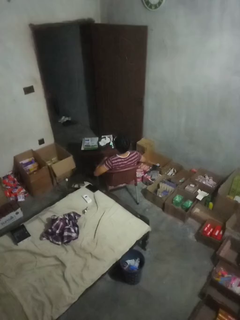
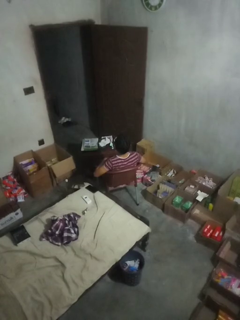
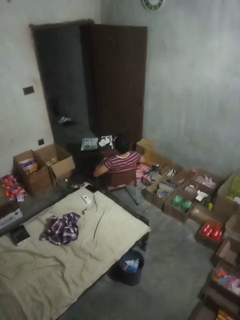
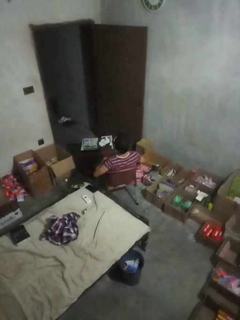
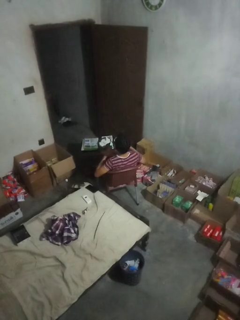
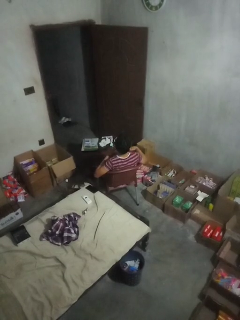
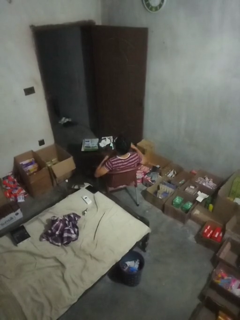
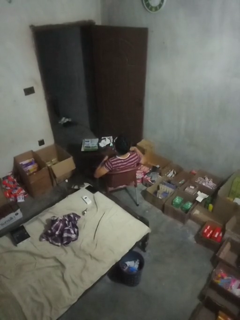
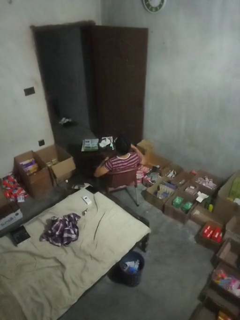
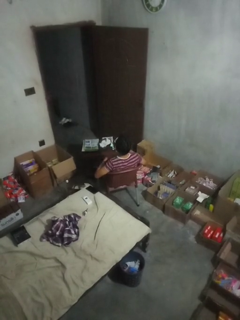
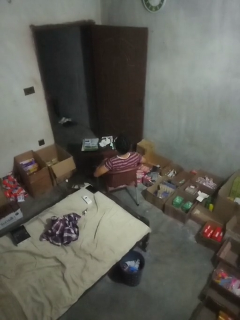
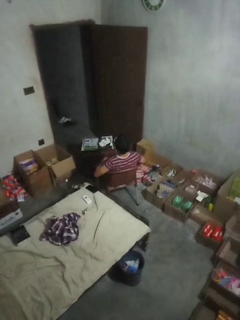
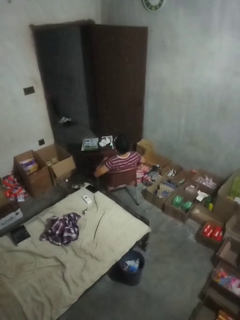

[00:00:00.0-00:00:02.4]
person drums on chest

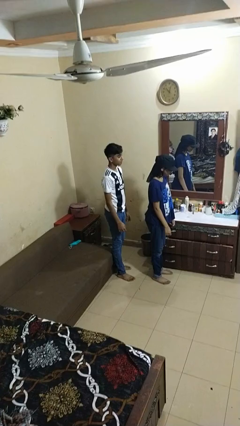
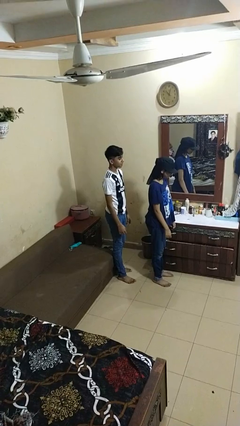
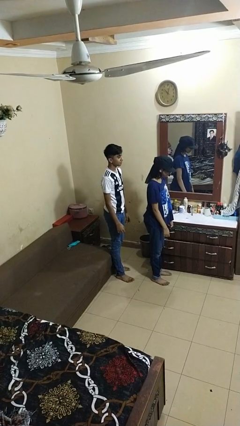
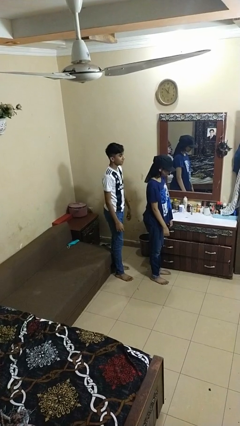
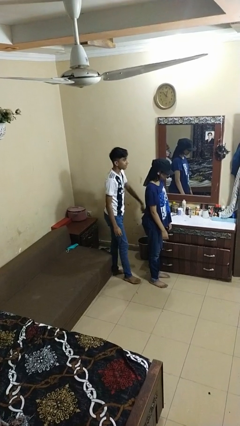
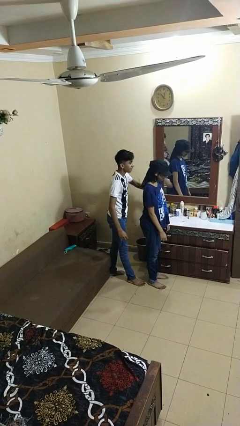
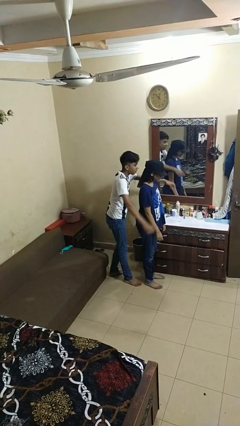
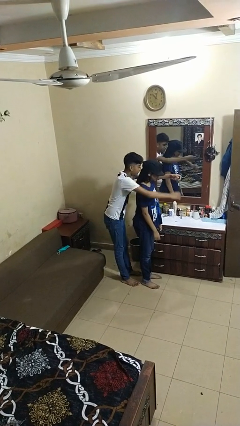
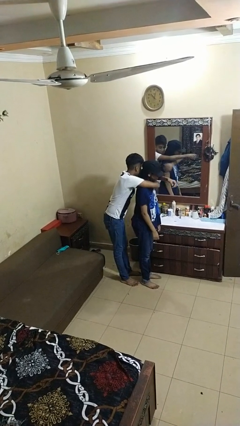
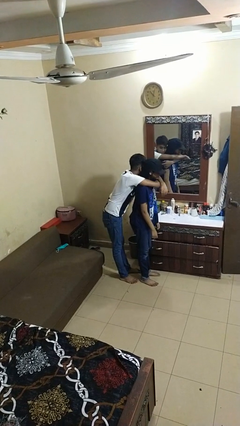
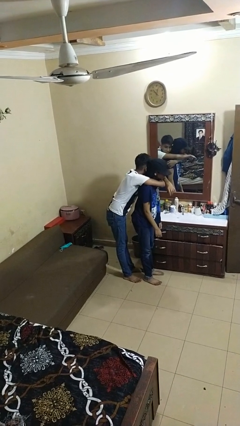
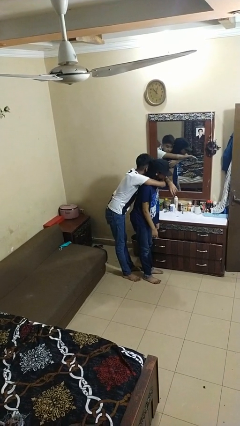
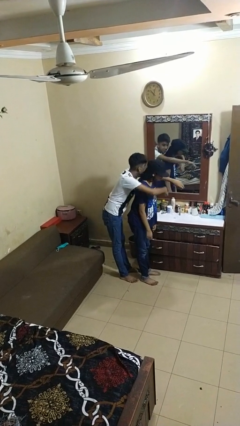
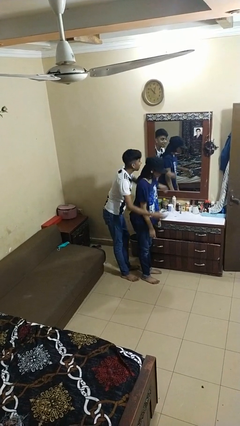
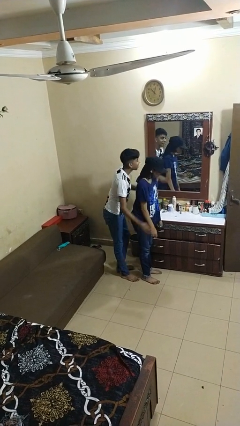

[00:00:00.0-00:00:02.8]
person hugs person from behind

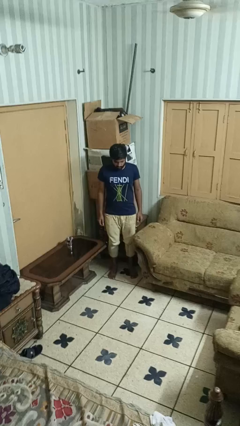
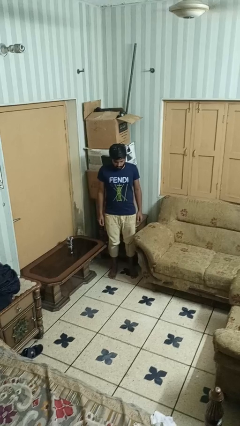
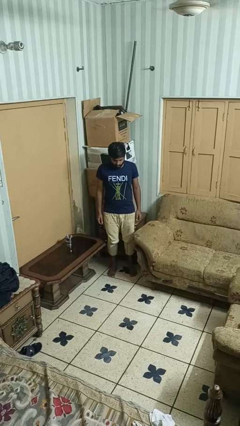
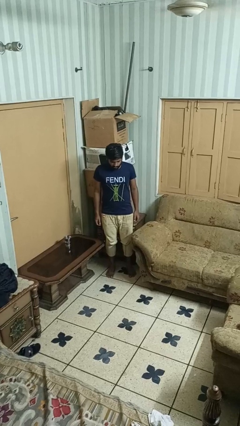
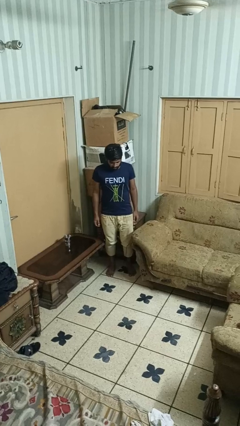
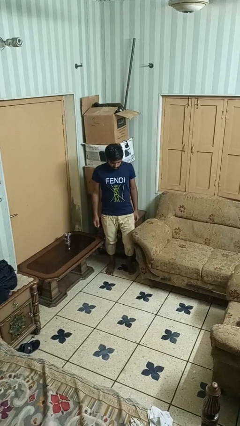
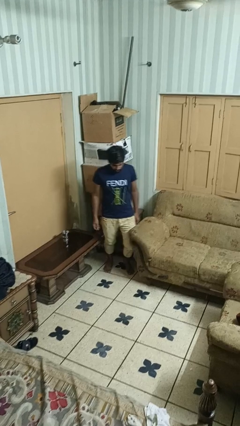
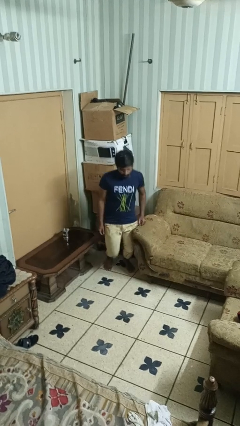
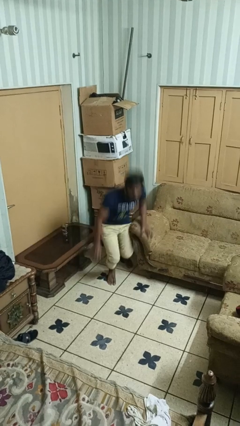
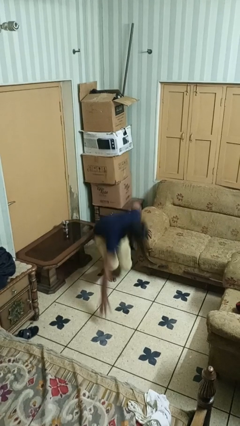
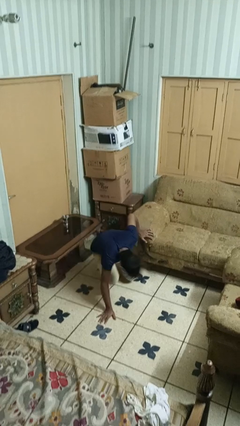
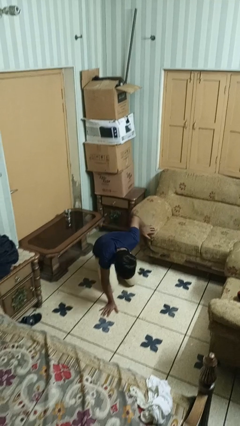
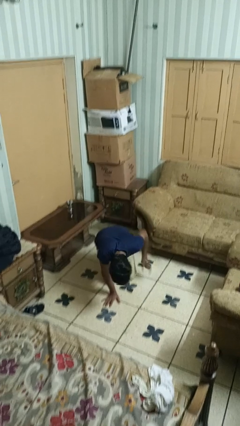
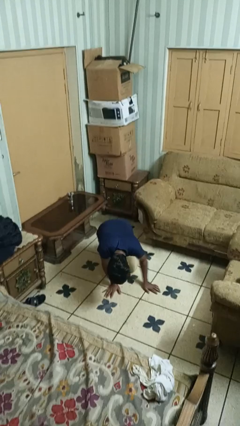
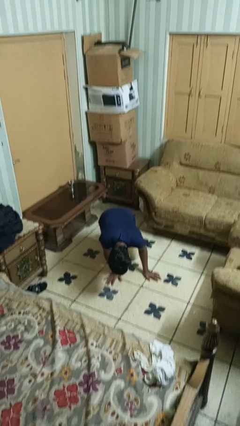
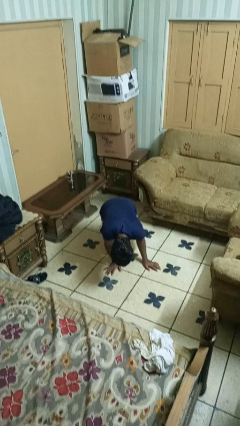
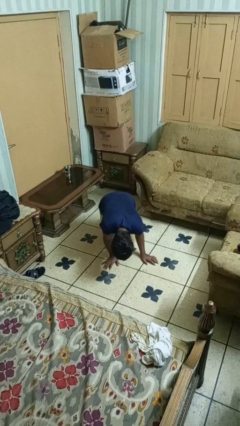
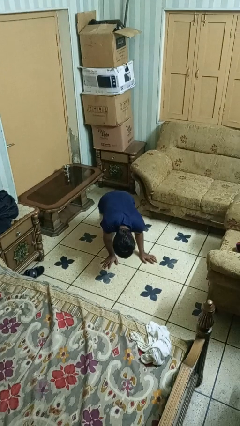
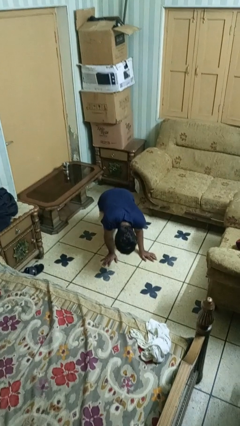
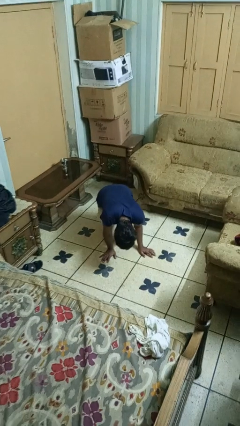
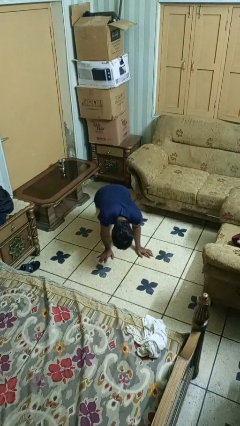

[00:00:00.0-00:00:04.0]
person trips on object on floor

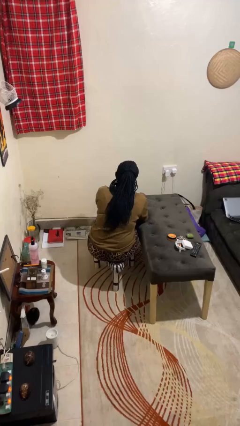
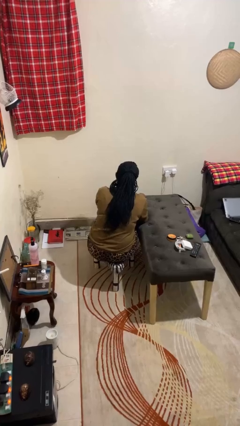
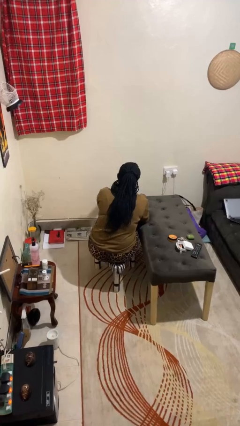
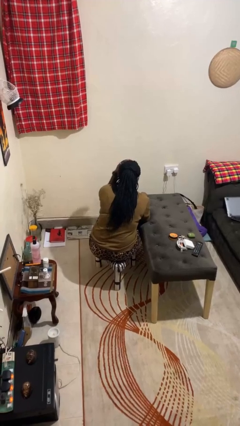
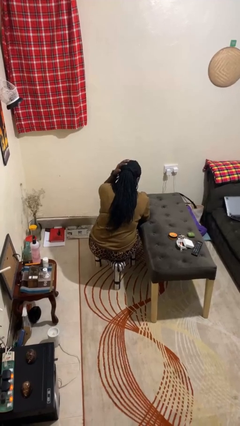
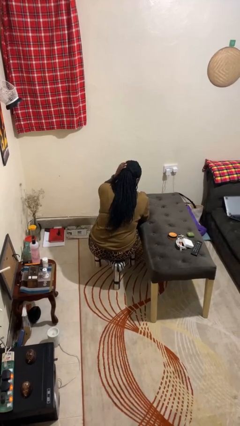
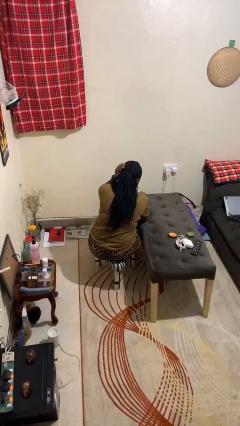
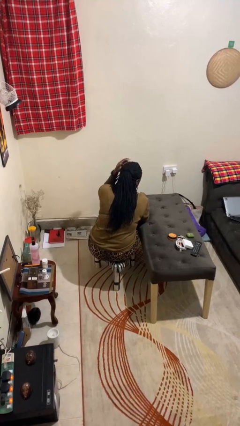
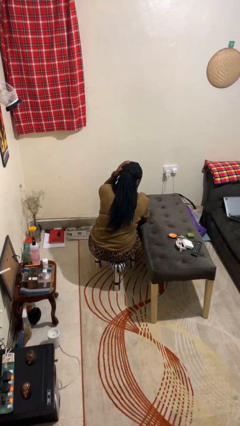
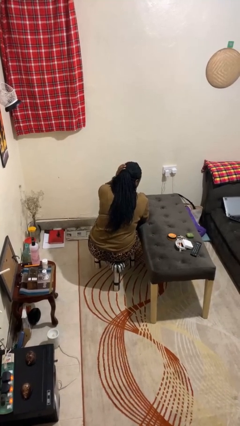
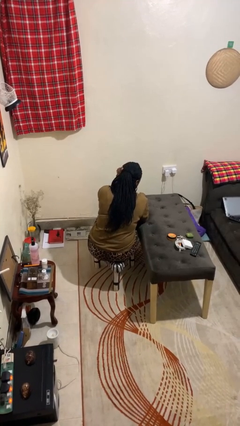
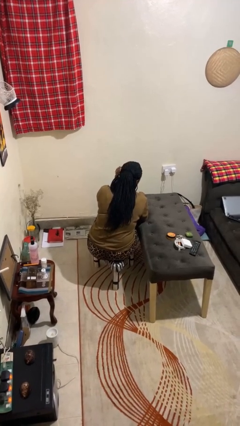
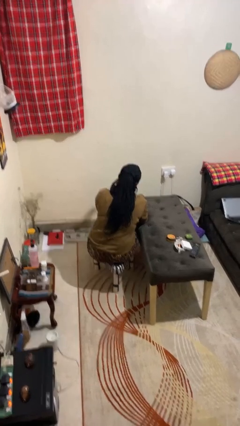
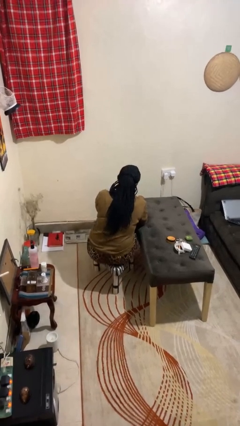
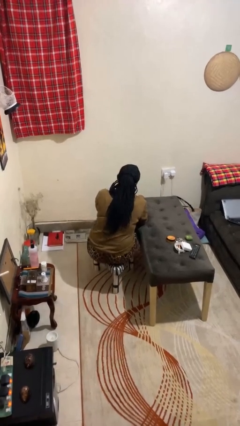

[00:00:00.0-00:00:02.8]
person strokes hair

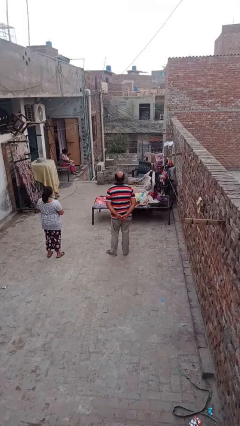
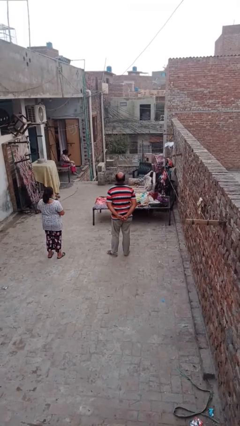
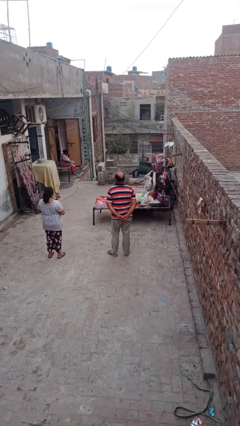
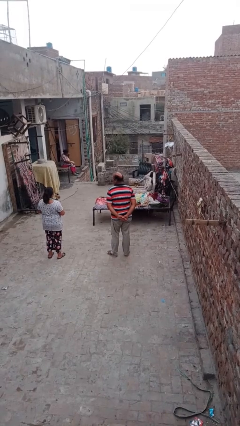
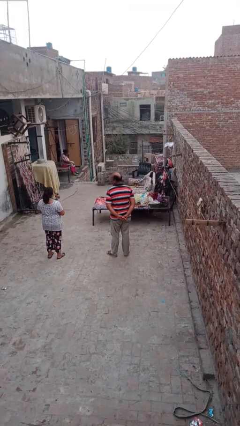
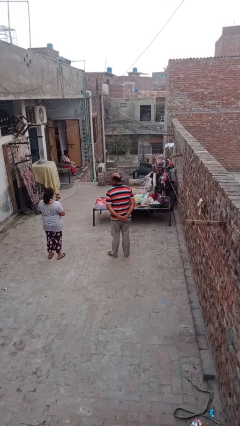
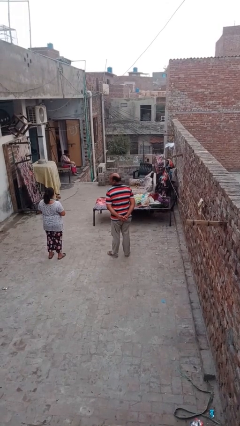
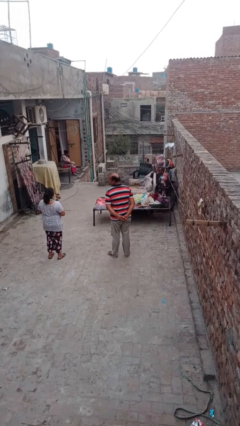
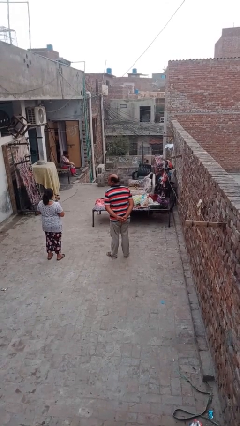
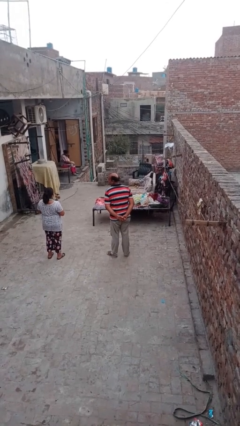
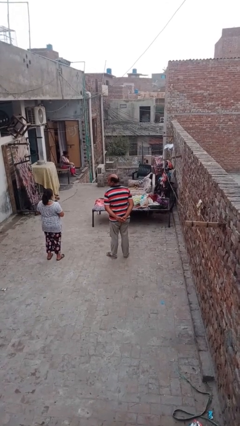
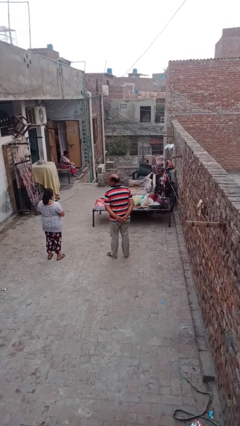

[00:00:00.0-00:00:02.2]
person looks over shoulder

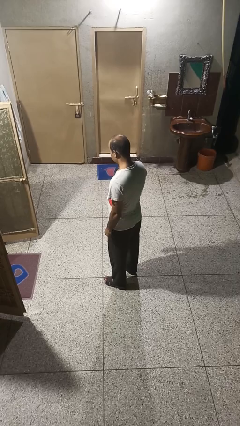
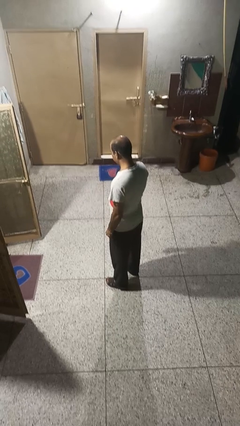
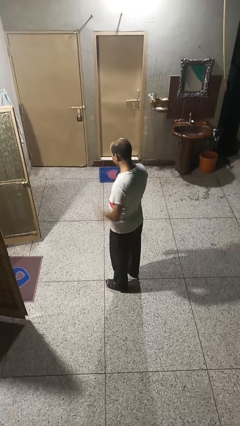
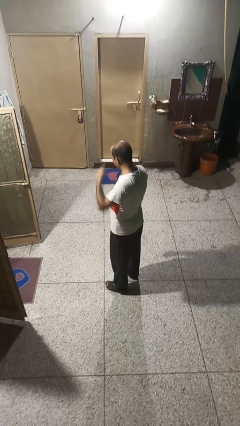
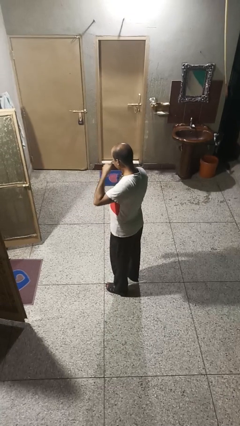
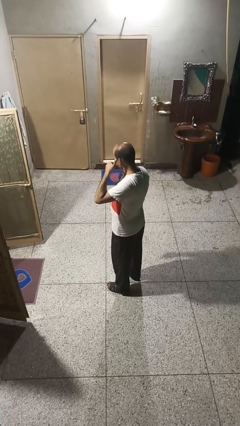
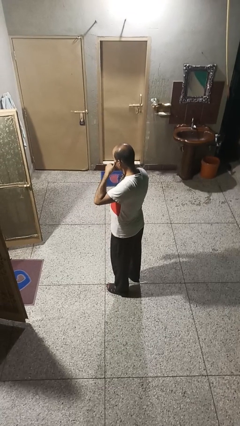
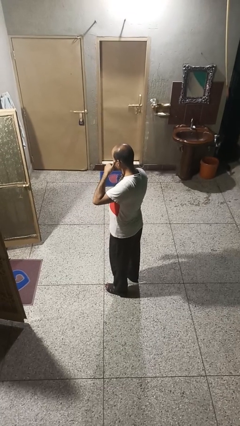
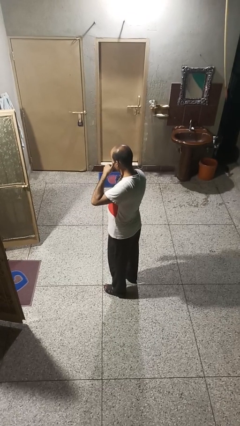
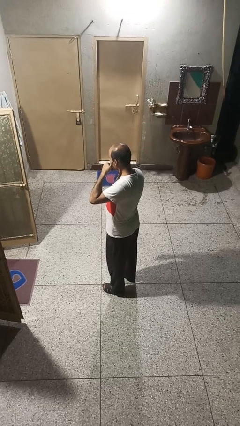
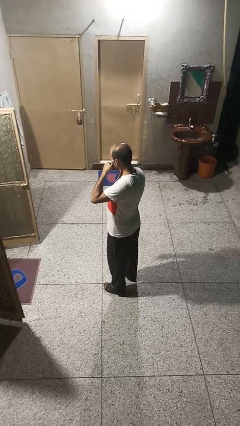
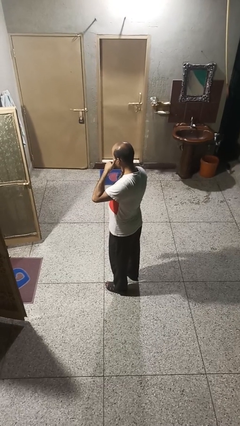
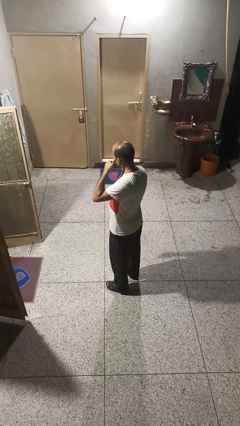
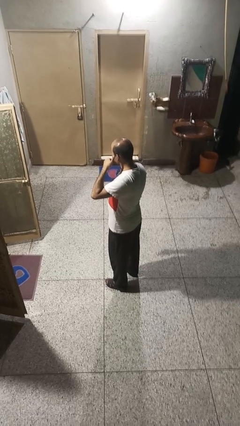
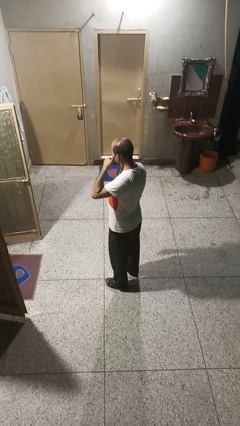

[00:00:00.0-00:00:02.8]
person gestures call me

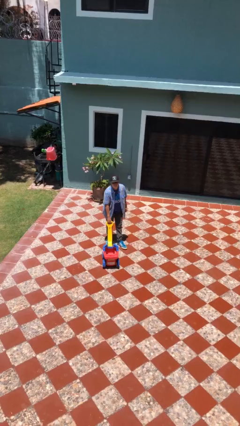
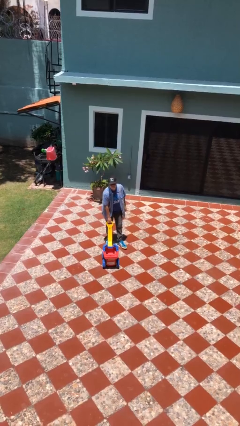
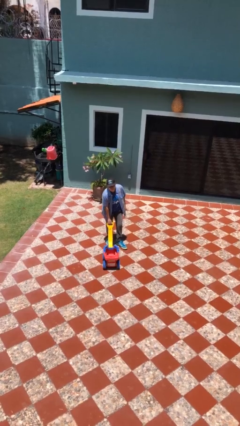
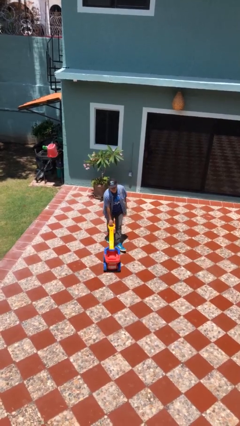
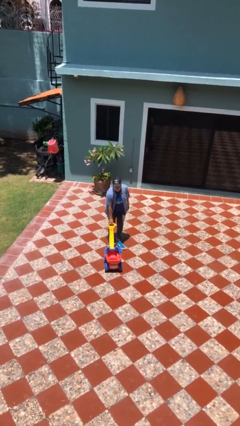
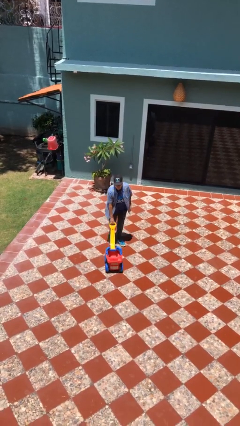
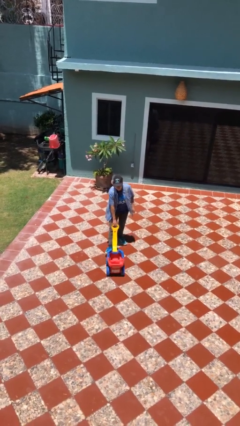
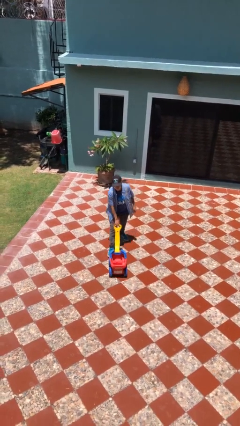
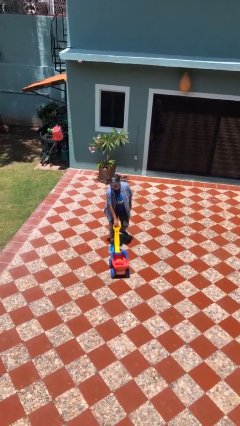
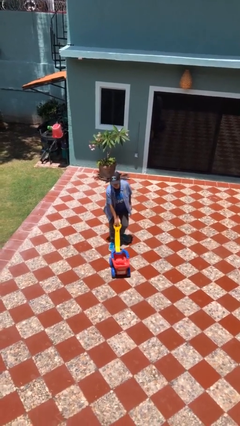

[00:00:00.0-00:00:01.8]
person pushes wheeled cart
